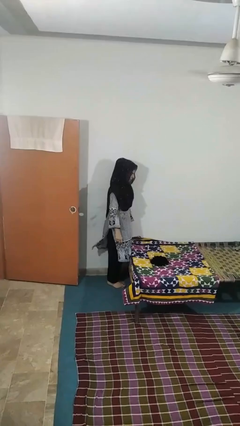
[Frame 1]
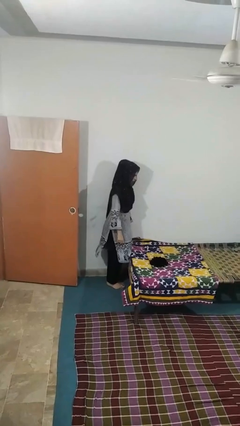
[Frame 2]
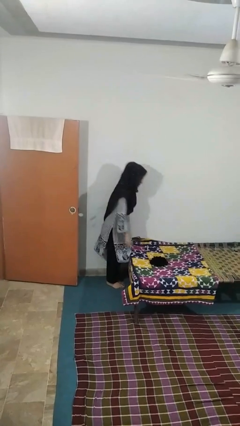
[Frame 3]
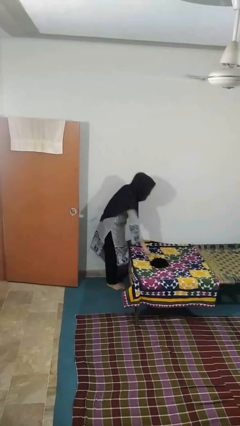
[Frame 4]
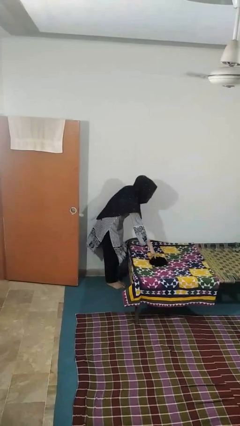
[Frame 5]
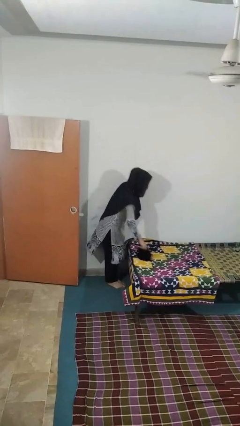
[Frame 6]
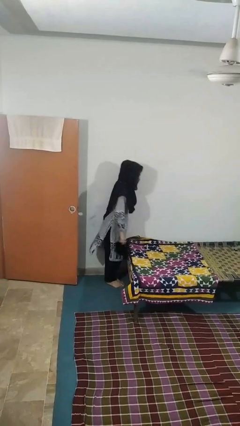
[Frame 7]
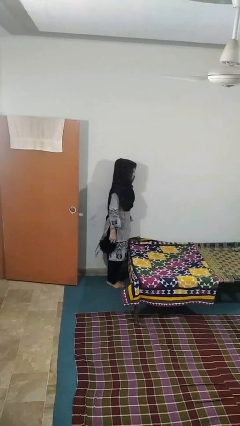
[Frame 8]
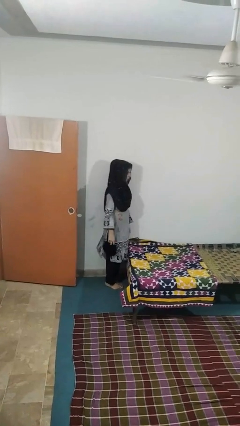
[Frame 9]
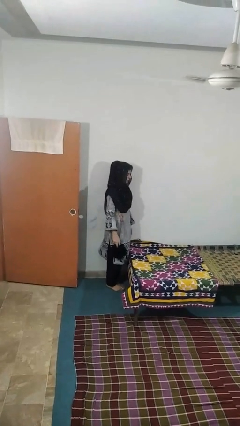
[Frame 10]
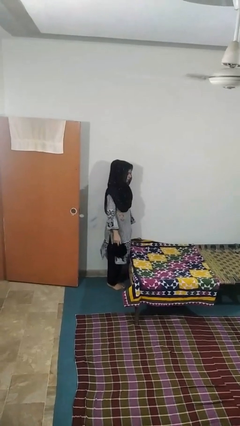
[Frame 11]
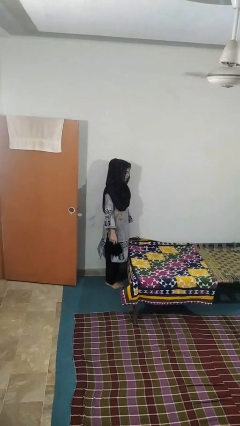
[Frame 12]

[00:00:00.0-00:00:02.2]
person picks up object from bed

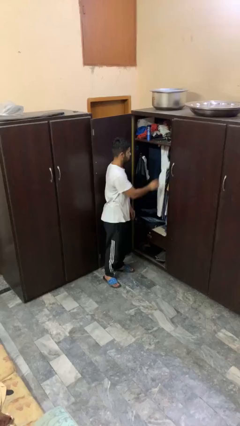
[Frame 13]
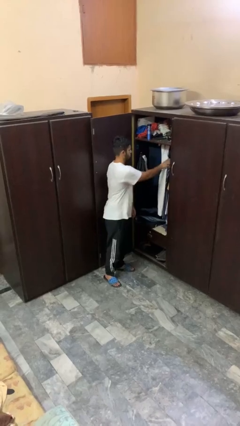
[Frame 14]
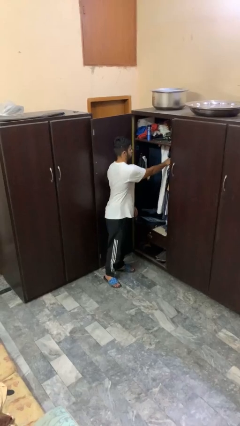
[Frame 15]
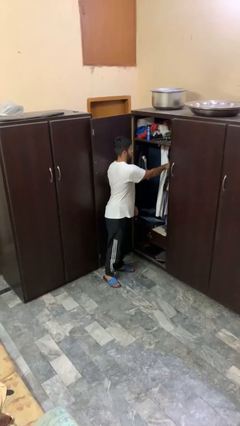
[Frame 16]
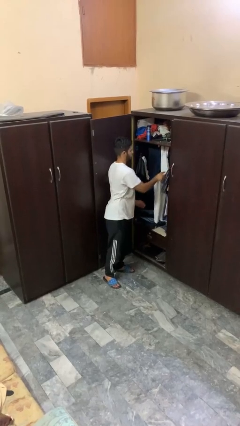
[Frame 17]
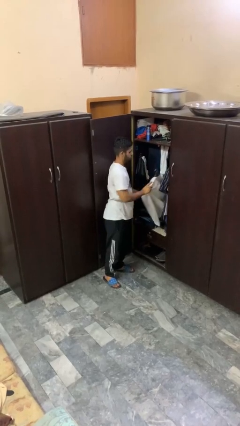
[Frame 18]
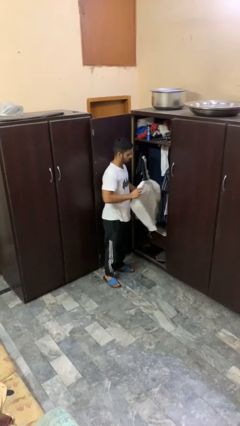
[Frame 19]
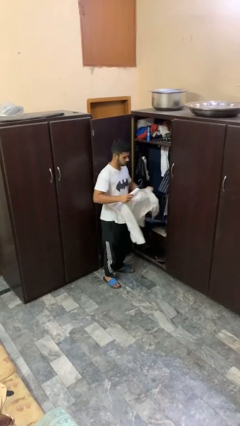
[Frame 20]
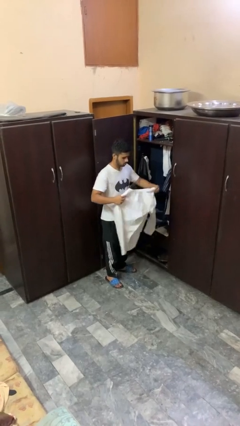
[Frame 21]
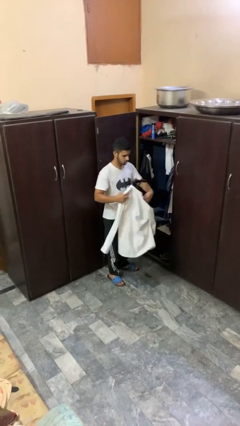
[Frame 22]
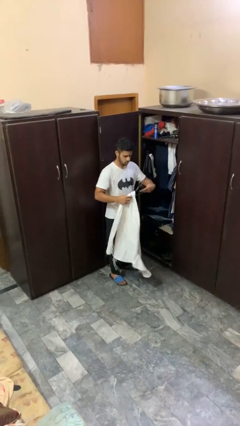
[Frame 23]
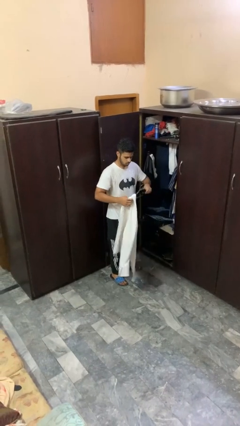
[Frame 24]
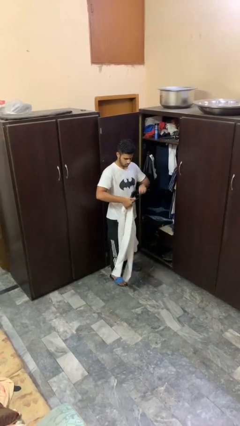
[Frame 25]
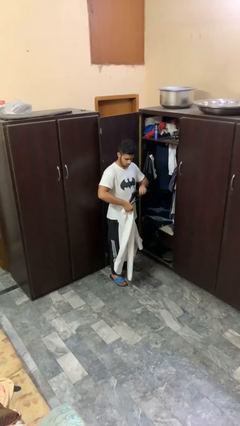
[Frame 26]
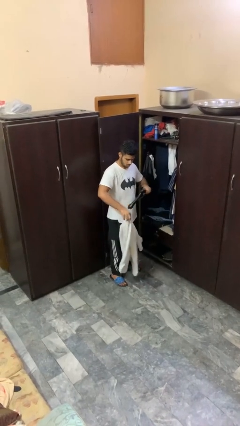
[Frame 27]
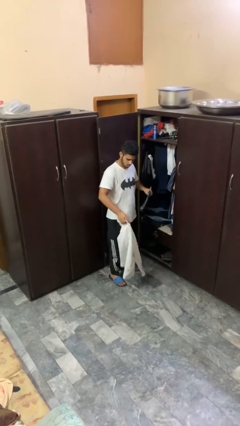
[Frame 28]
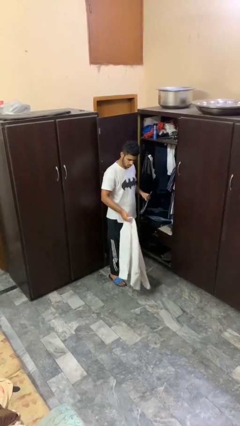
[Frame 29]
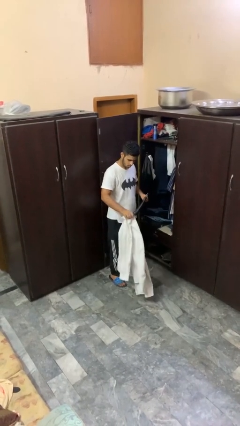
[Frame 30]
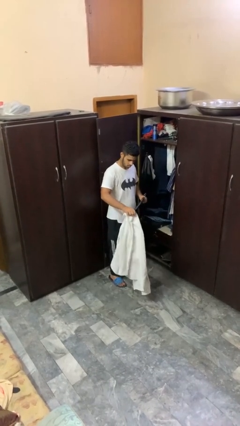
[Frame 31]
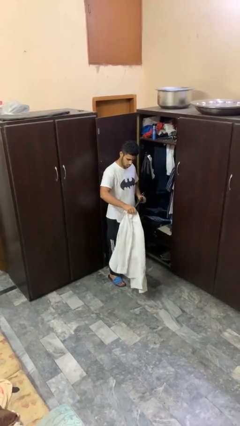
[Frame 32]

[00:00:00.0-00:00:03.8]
person takes clothes from closet

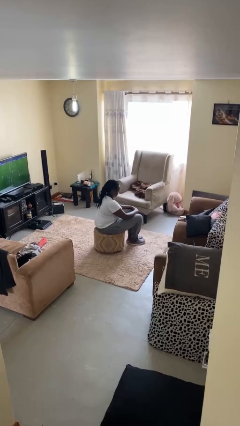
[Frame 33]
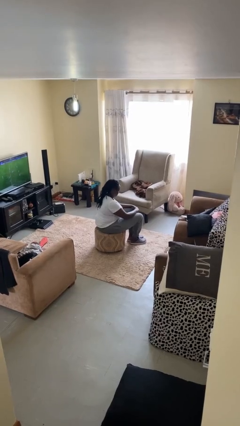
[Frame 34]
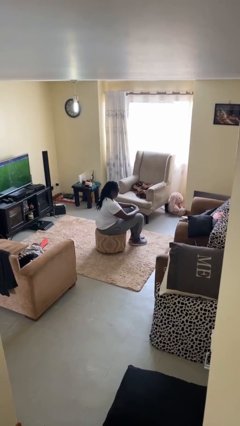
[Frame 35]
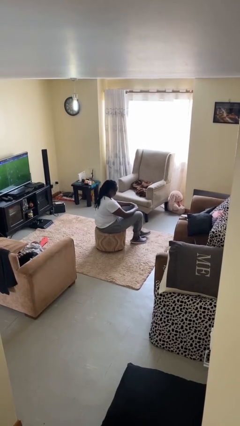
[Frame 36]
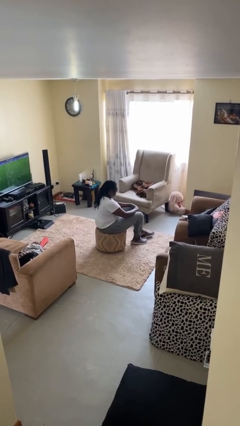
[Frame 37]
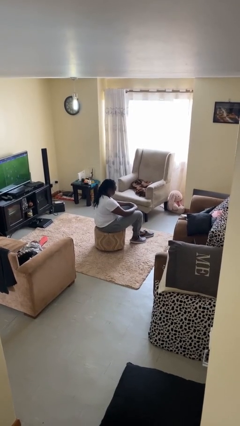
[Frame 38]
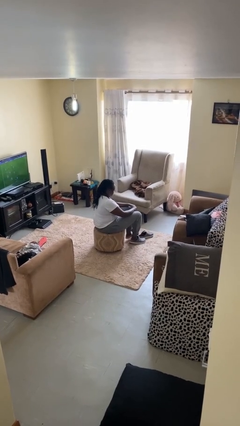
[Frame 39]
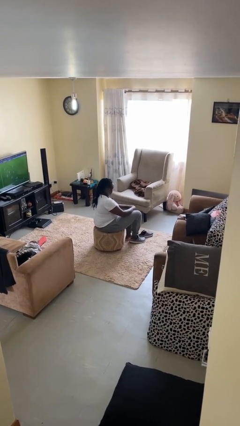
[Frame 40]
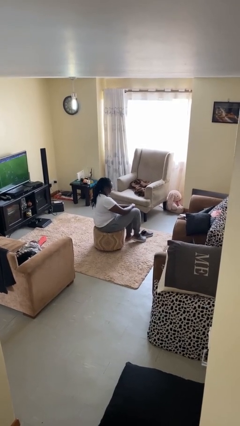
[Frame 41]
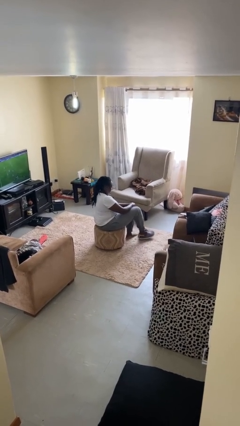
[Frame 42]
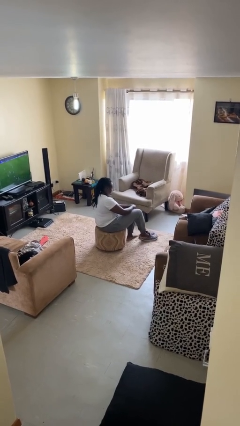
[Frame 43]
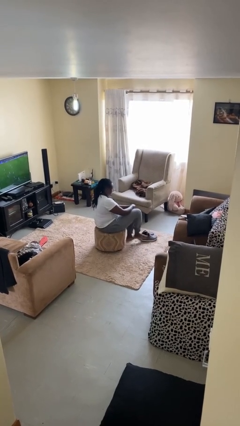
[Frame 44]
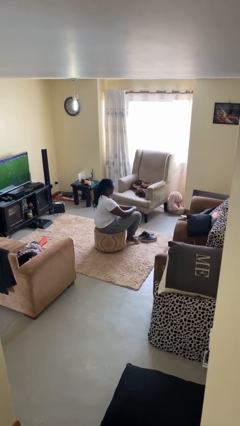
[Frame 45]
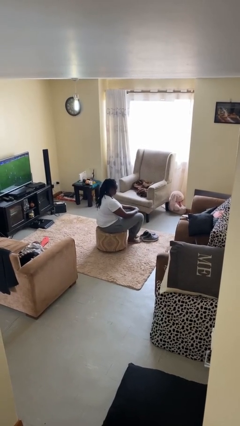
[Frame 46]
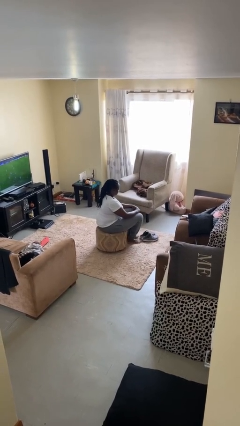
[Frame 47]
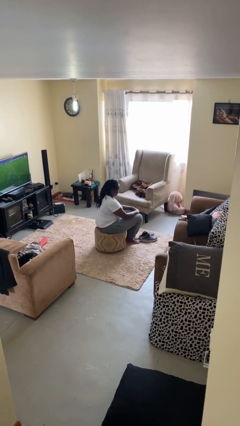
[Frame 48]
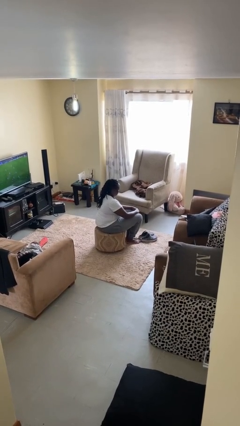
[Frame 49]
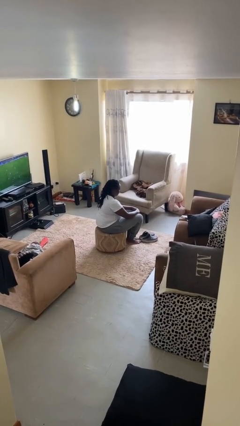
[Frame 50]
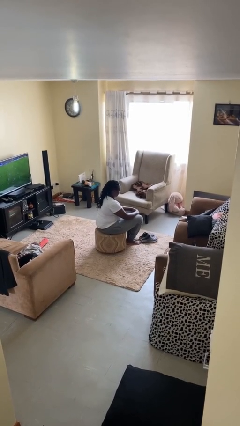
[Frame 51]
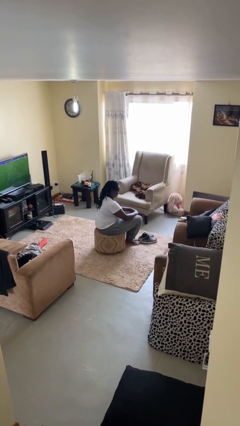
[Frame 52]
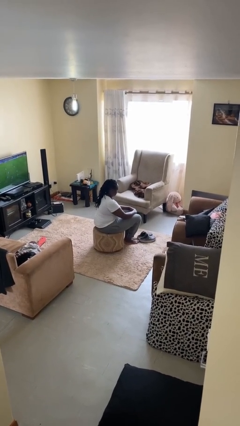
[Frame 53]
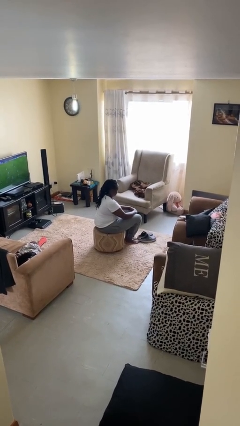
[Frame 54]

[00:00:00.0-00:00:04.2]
person takes off shoes

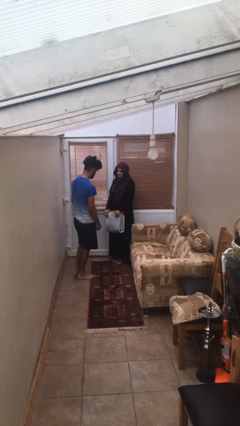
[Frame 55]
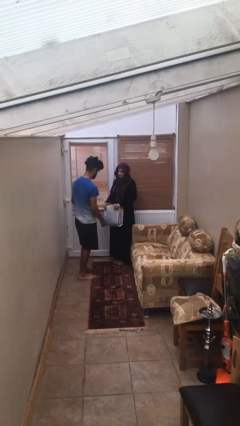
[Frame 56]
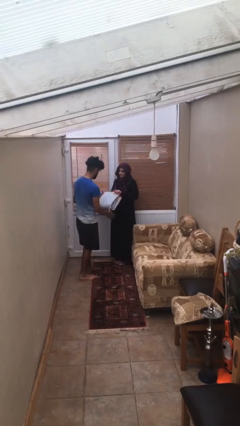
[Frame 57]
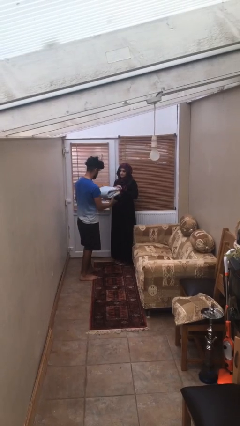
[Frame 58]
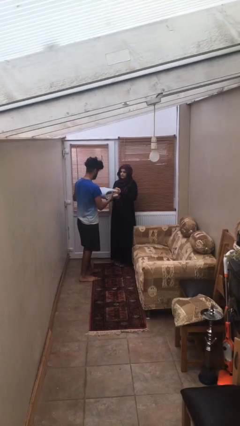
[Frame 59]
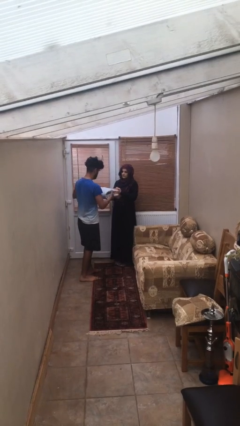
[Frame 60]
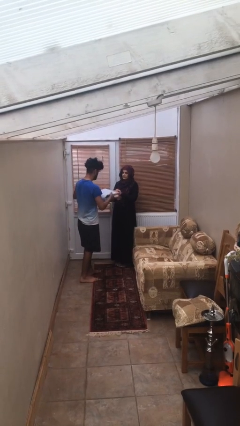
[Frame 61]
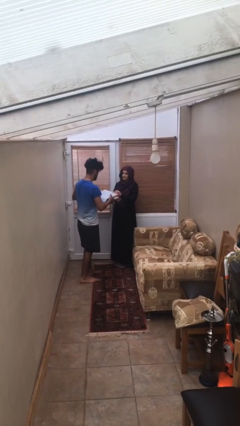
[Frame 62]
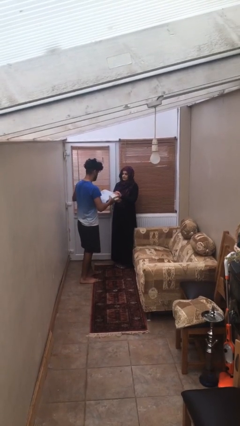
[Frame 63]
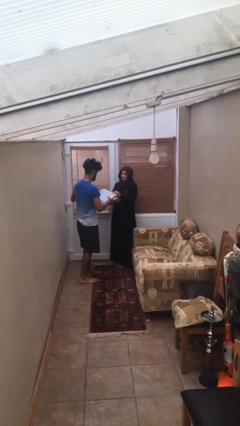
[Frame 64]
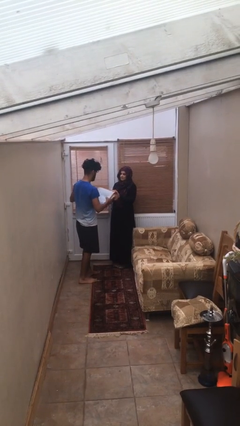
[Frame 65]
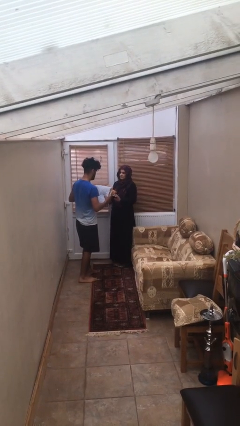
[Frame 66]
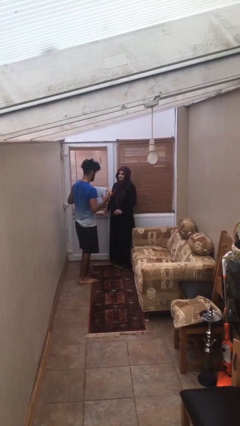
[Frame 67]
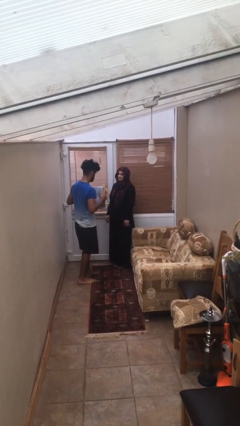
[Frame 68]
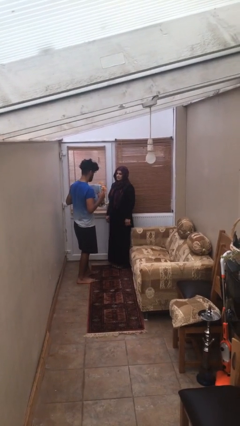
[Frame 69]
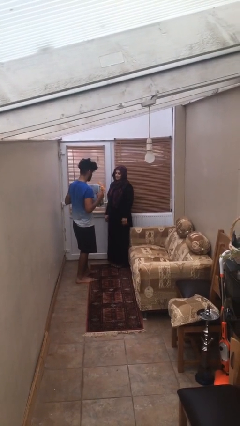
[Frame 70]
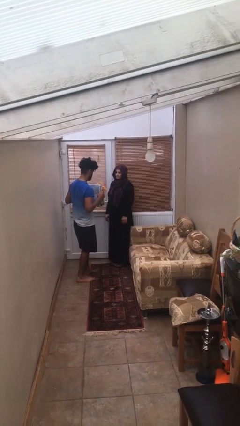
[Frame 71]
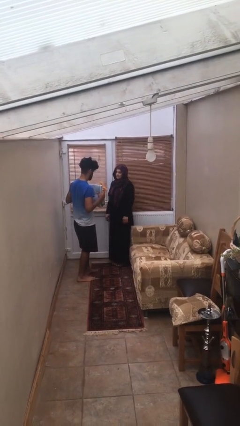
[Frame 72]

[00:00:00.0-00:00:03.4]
person transfers object to person

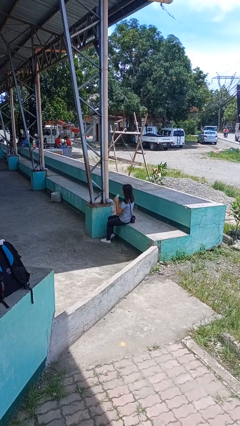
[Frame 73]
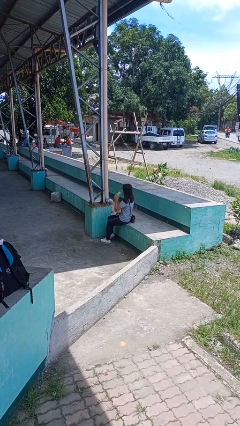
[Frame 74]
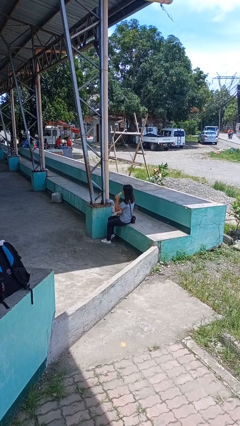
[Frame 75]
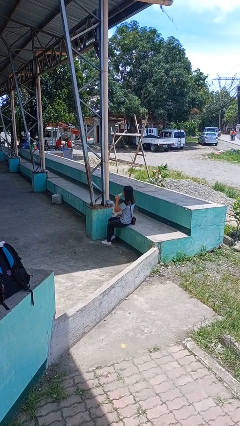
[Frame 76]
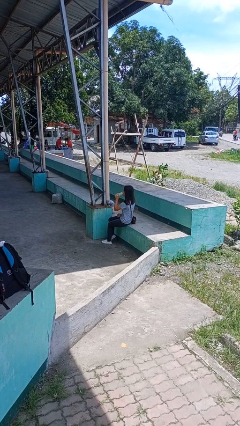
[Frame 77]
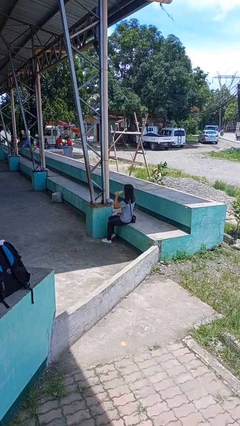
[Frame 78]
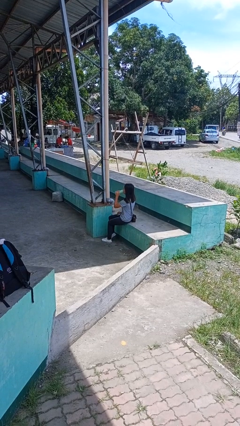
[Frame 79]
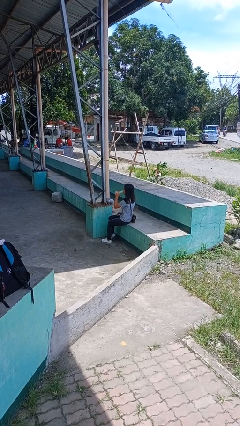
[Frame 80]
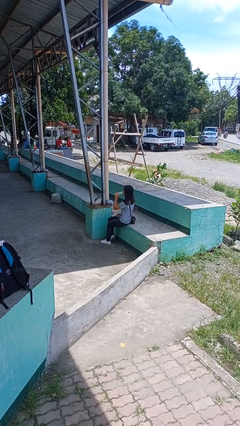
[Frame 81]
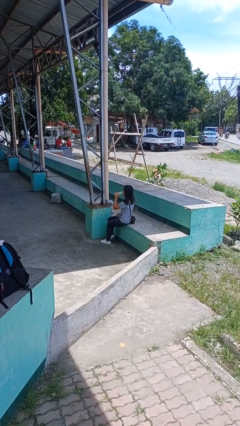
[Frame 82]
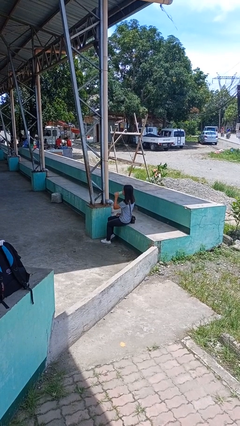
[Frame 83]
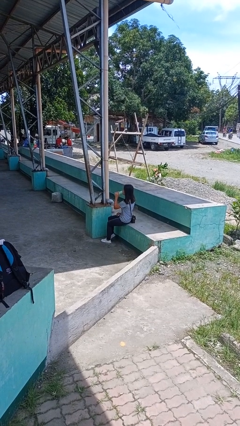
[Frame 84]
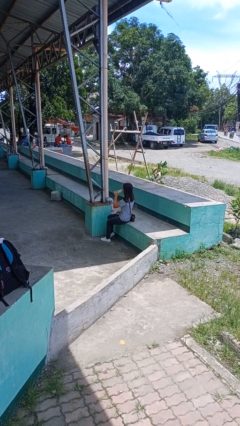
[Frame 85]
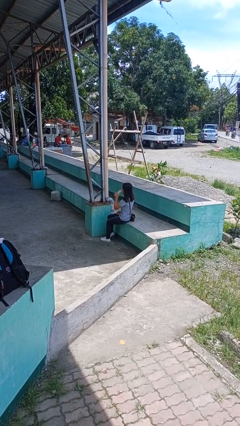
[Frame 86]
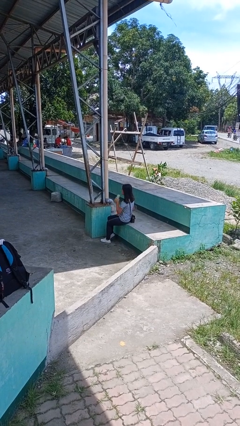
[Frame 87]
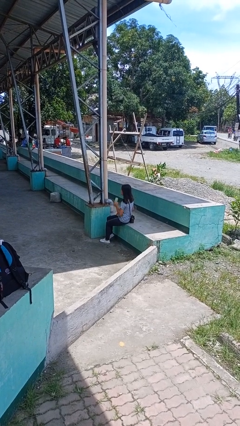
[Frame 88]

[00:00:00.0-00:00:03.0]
person drinks from bottle

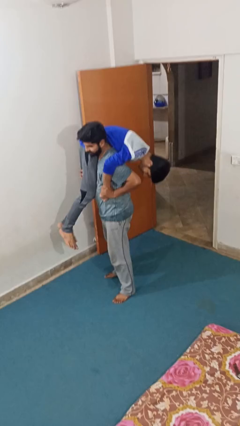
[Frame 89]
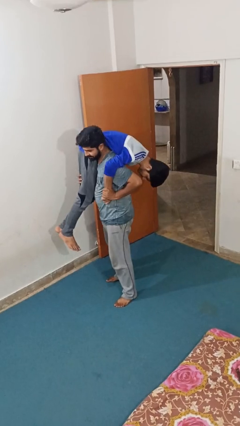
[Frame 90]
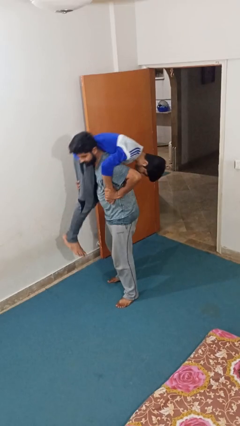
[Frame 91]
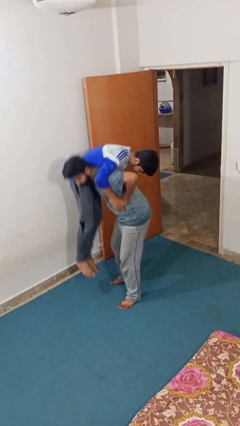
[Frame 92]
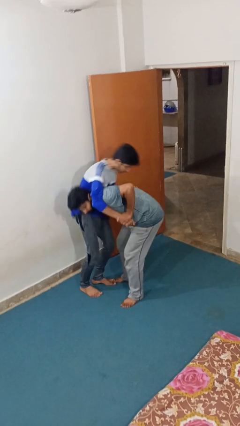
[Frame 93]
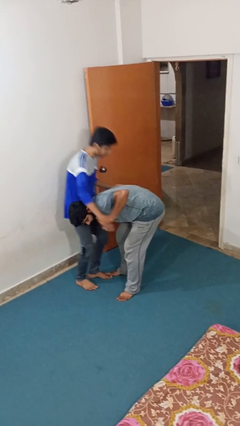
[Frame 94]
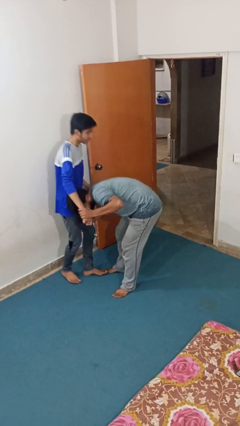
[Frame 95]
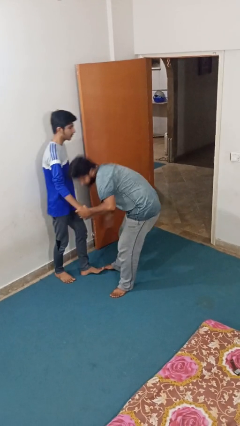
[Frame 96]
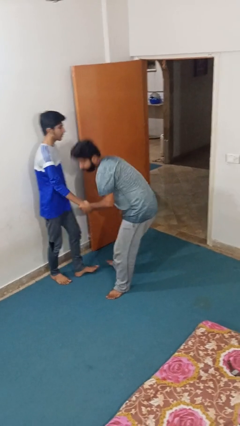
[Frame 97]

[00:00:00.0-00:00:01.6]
person puts down person
